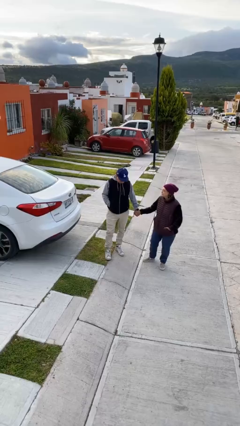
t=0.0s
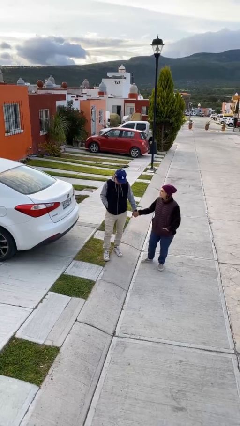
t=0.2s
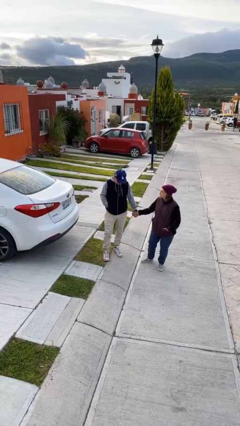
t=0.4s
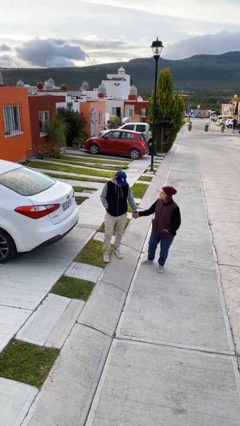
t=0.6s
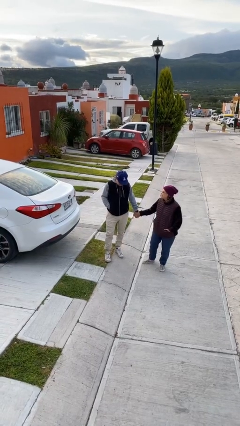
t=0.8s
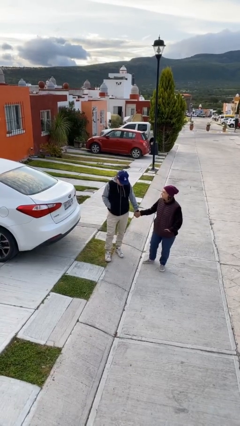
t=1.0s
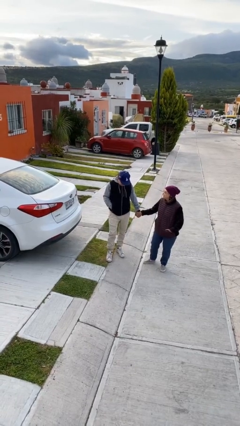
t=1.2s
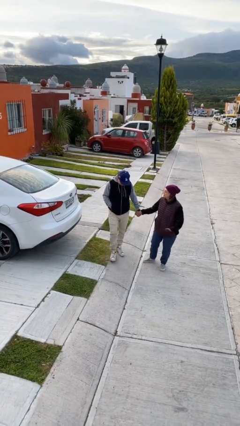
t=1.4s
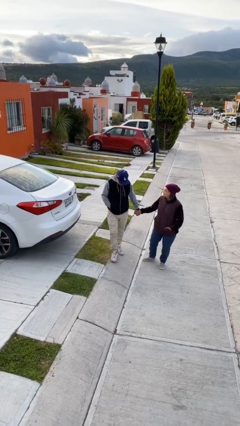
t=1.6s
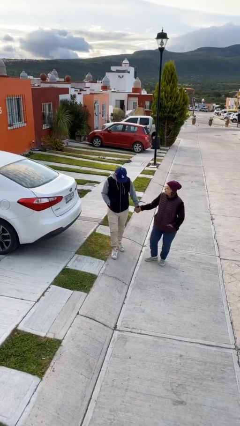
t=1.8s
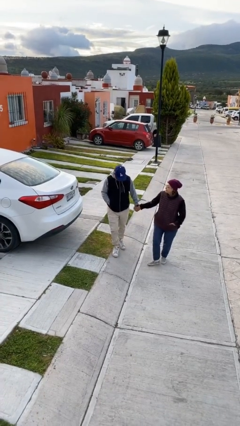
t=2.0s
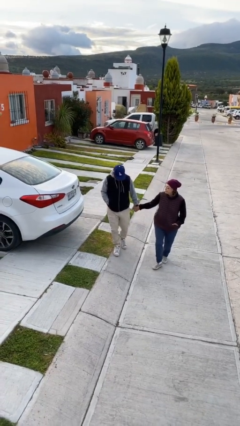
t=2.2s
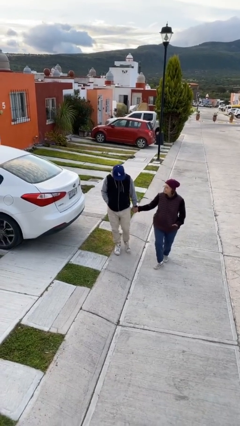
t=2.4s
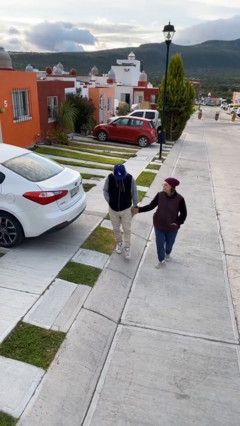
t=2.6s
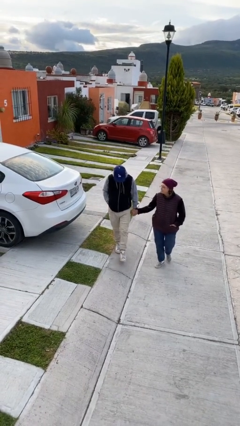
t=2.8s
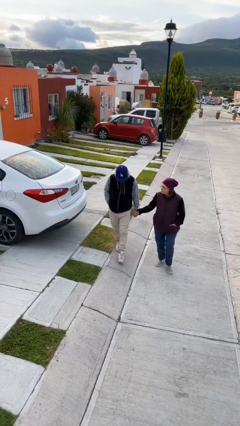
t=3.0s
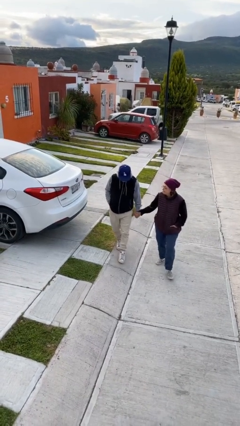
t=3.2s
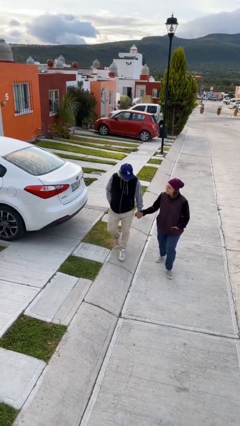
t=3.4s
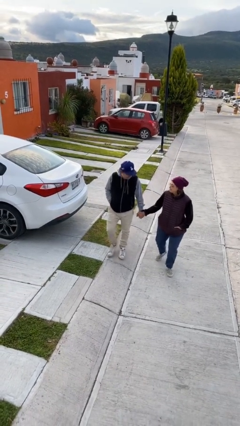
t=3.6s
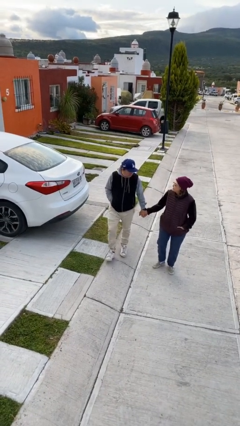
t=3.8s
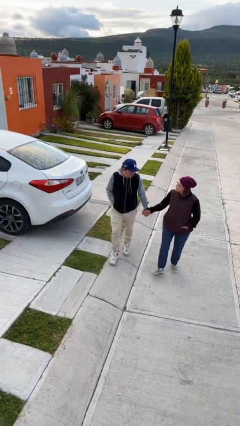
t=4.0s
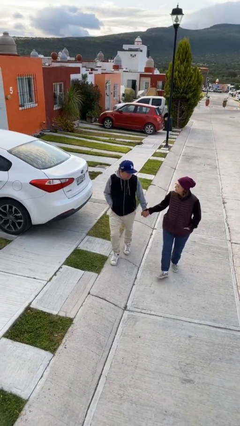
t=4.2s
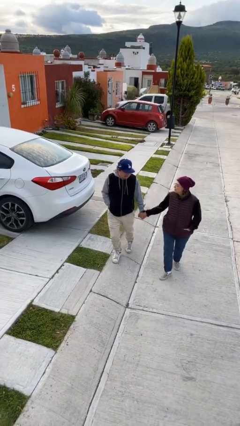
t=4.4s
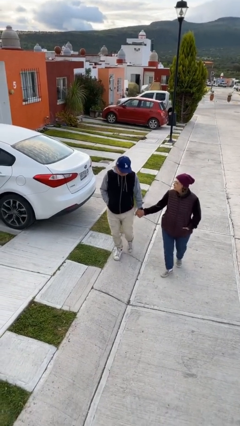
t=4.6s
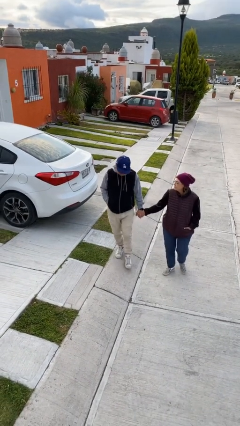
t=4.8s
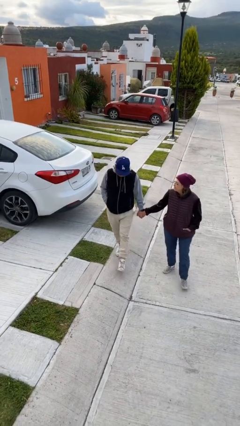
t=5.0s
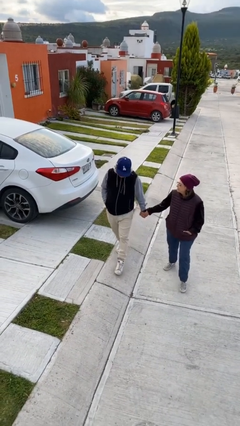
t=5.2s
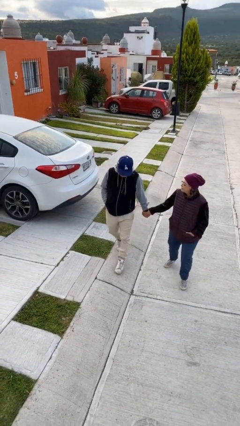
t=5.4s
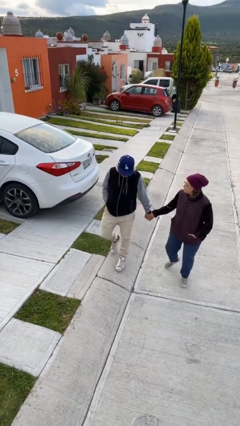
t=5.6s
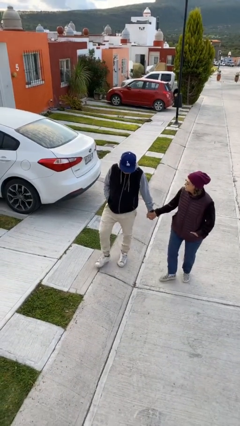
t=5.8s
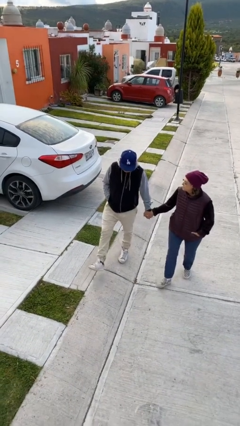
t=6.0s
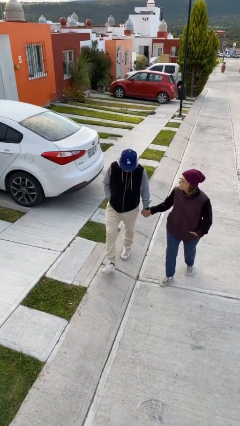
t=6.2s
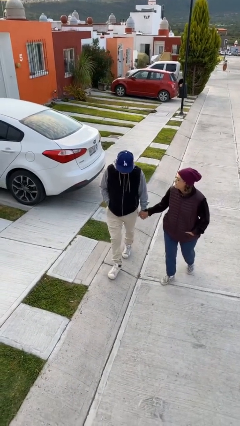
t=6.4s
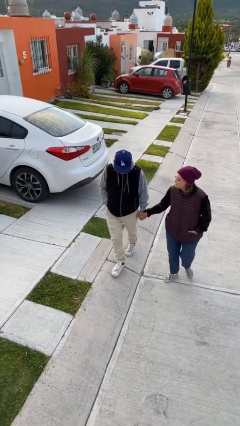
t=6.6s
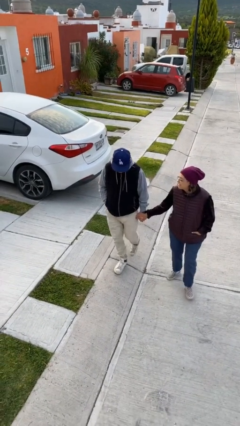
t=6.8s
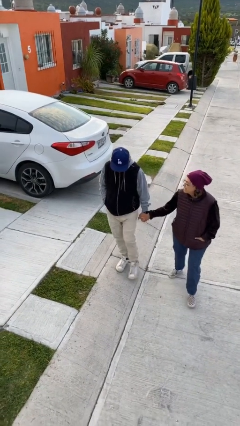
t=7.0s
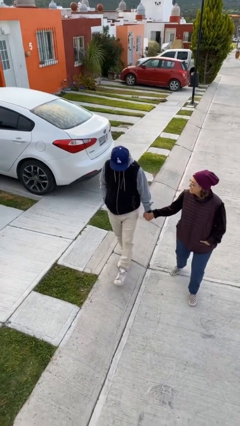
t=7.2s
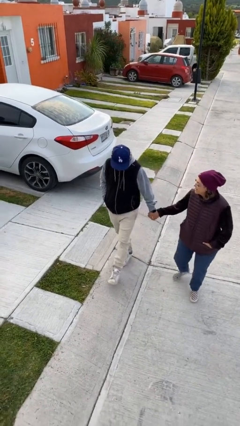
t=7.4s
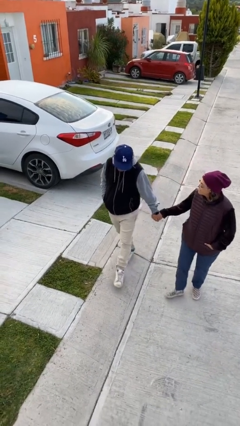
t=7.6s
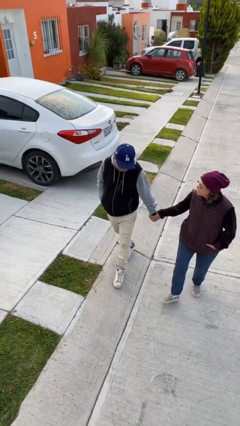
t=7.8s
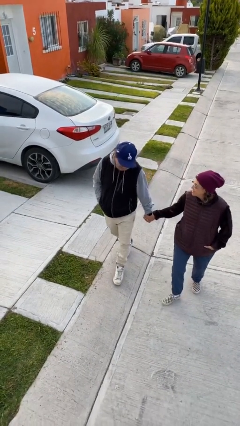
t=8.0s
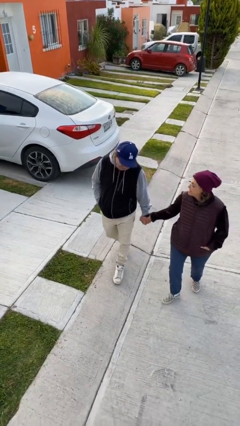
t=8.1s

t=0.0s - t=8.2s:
person holds hand

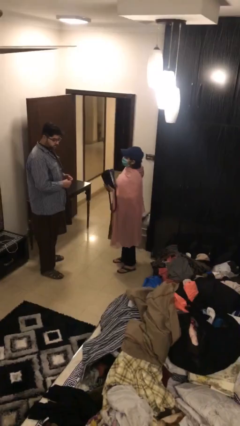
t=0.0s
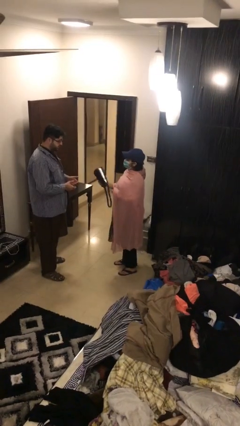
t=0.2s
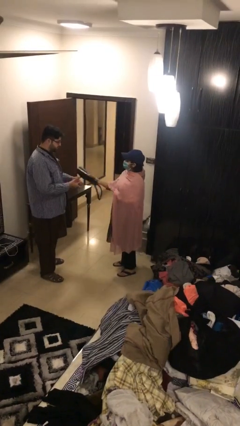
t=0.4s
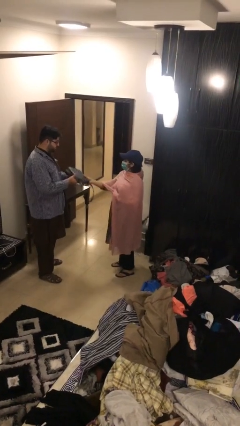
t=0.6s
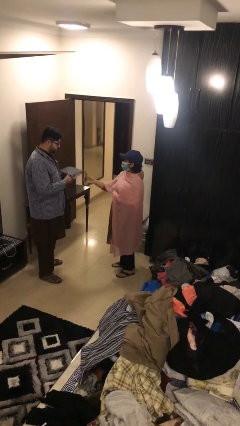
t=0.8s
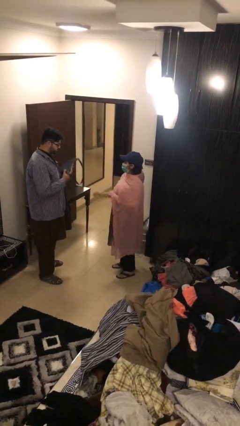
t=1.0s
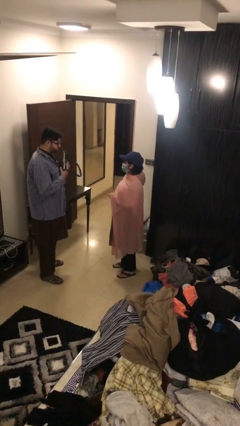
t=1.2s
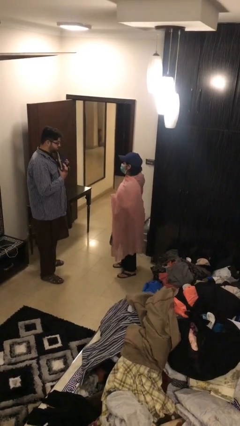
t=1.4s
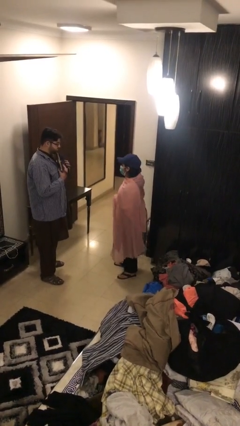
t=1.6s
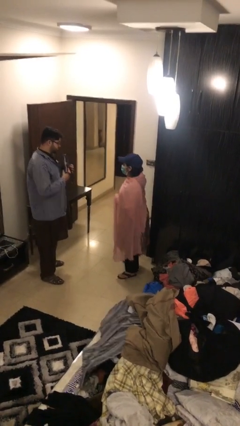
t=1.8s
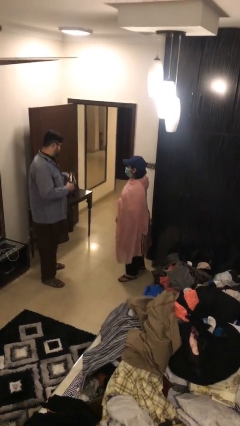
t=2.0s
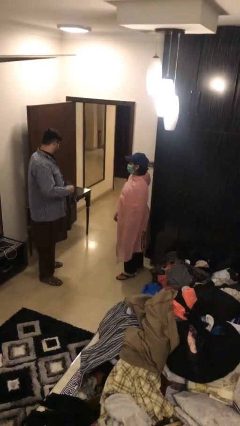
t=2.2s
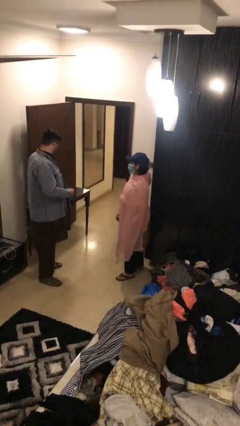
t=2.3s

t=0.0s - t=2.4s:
person transfers object to person

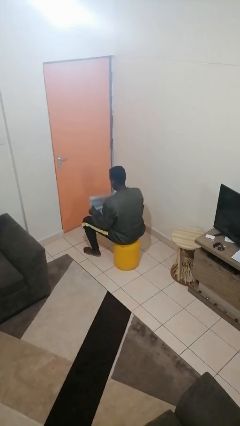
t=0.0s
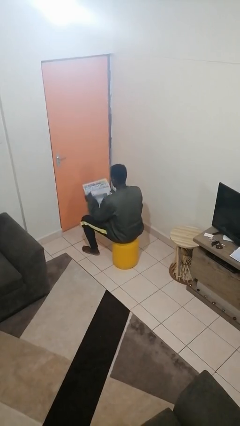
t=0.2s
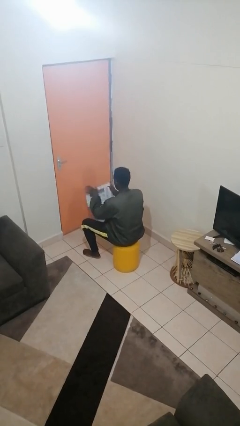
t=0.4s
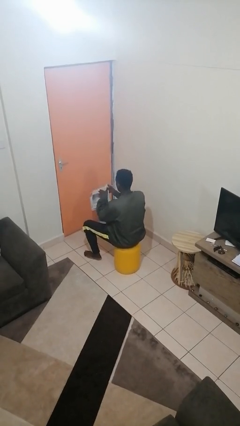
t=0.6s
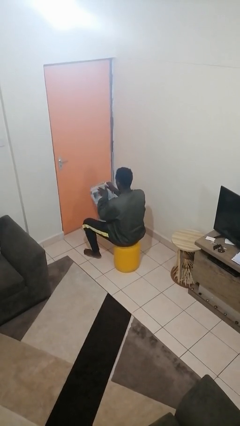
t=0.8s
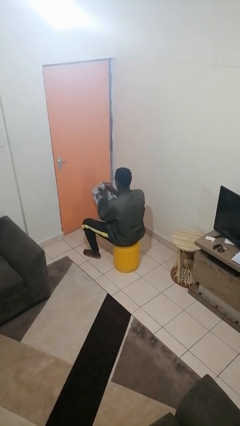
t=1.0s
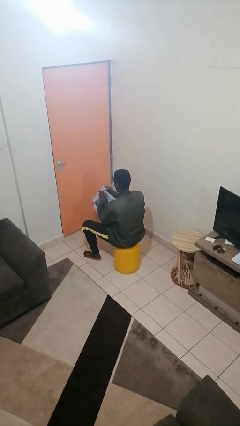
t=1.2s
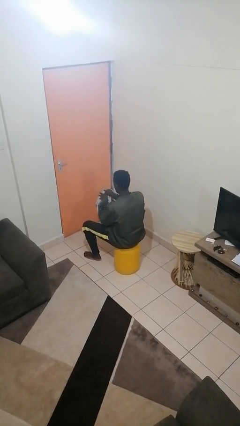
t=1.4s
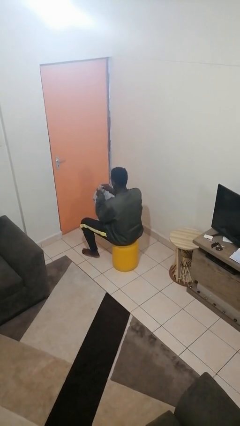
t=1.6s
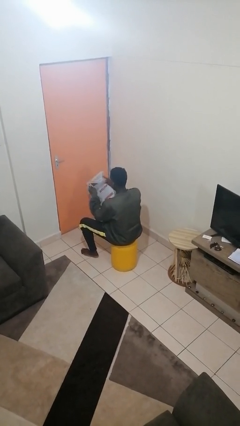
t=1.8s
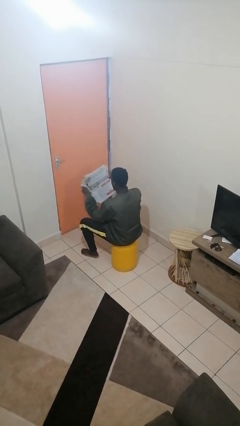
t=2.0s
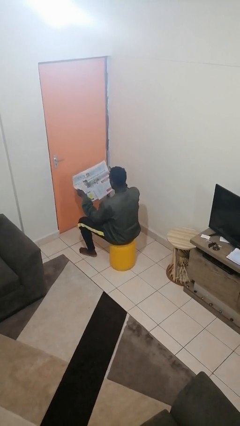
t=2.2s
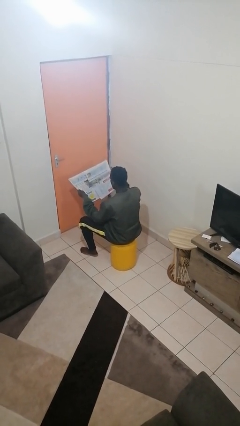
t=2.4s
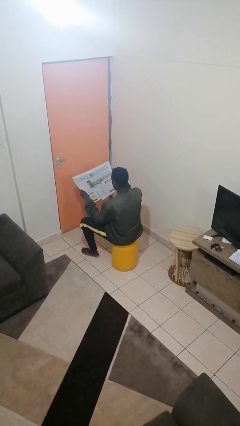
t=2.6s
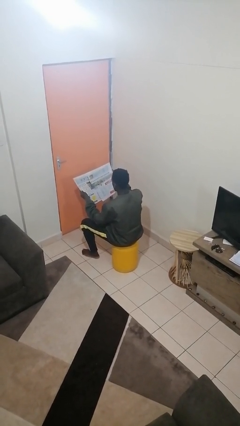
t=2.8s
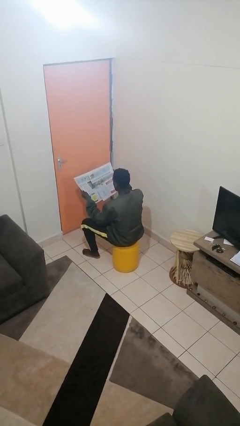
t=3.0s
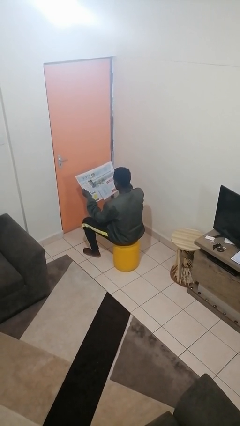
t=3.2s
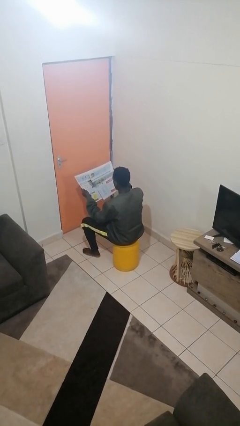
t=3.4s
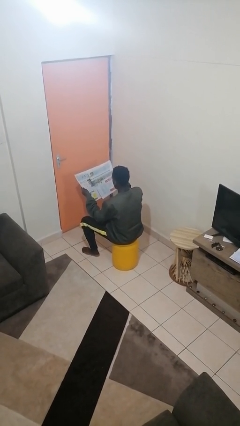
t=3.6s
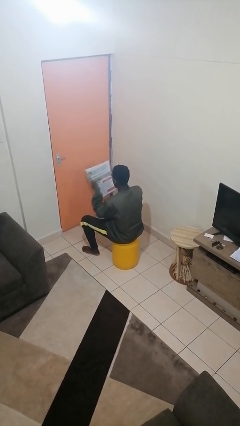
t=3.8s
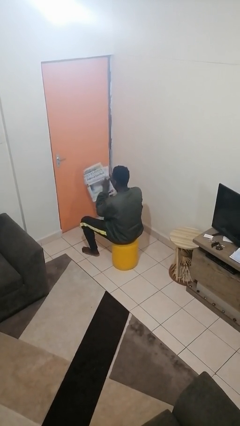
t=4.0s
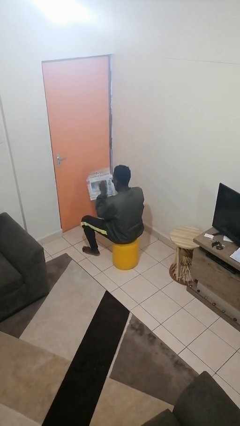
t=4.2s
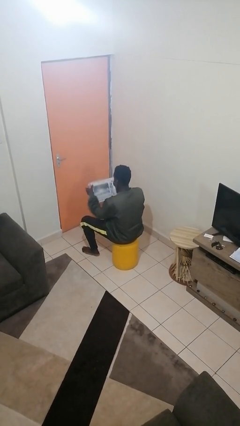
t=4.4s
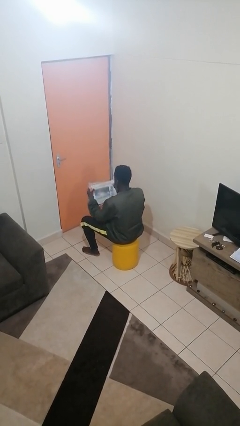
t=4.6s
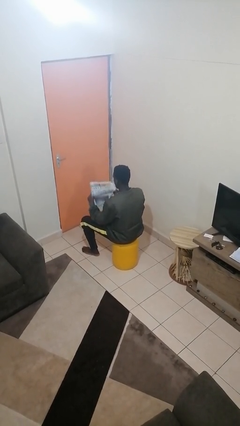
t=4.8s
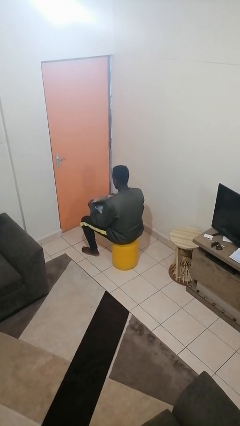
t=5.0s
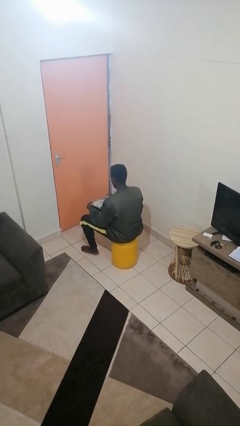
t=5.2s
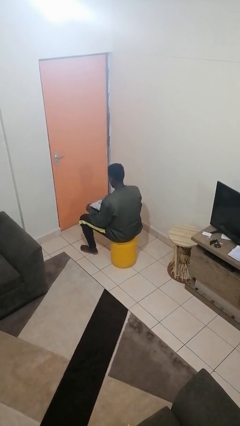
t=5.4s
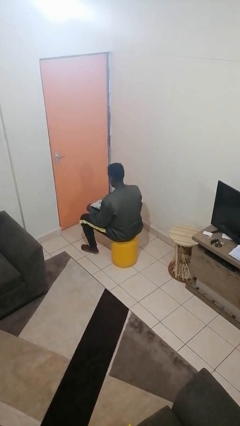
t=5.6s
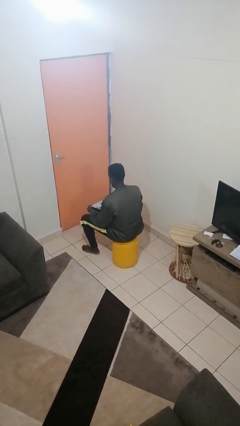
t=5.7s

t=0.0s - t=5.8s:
person reads newspaper

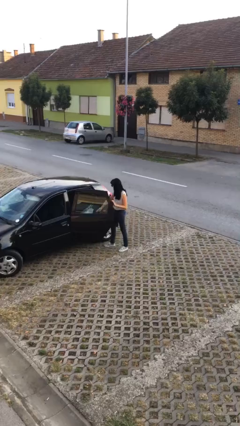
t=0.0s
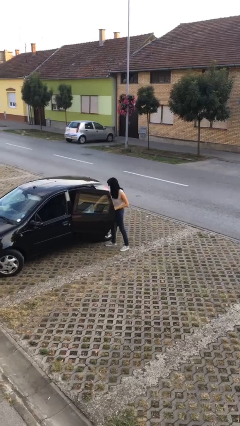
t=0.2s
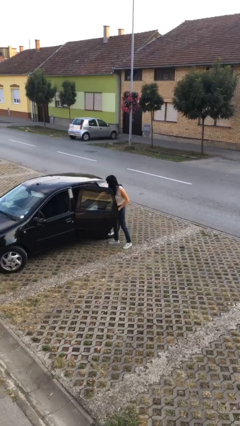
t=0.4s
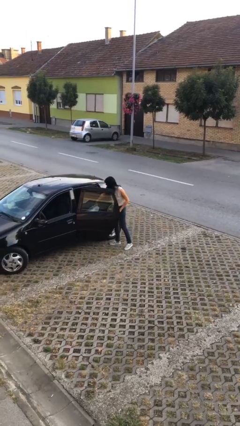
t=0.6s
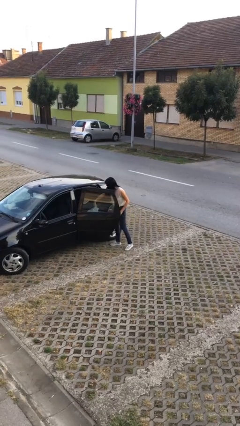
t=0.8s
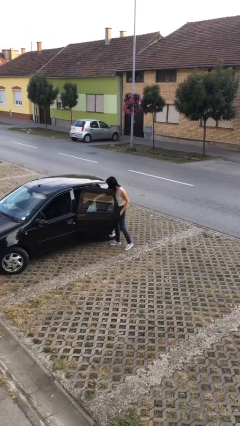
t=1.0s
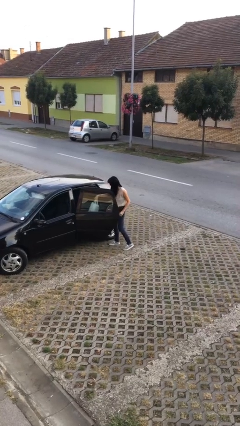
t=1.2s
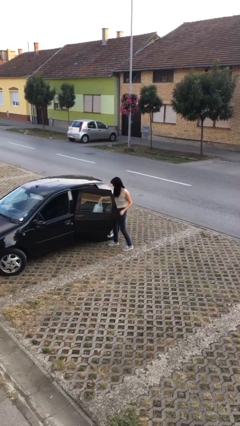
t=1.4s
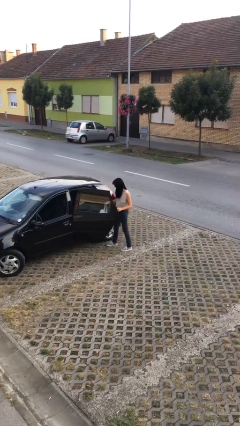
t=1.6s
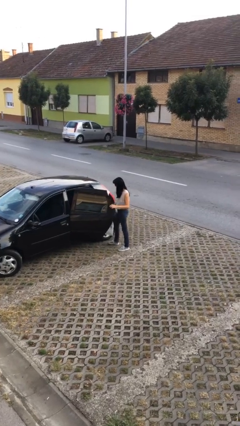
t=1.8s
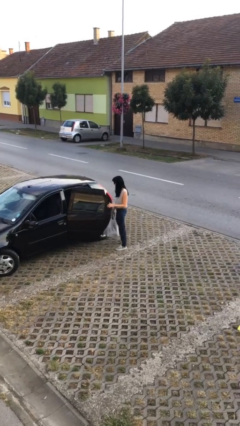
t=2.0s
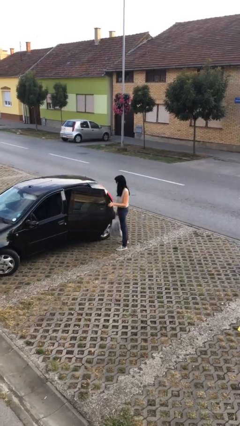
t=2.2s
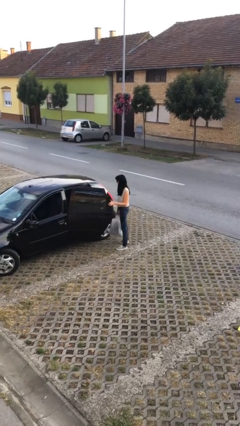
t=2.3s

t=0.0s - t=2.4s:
person unloads car
